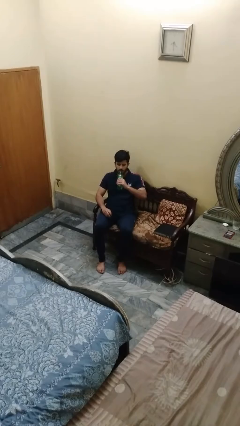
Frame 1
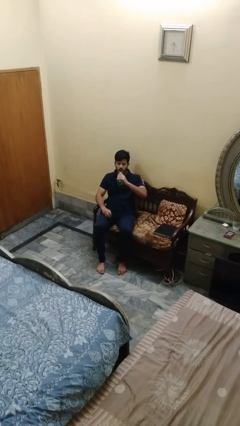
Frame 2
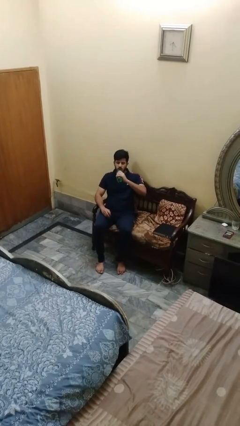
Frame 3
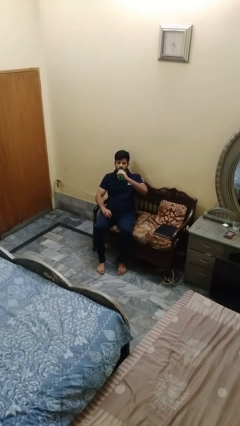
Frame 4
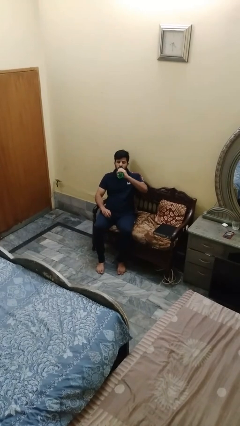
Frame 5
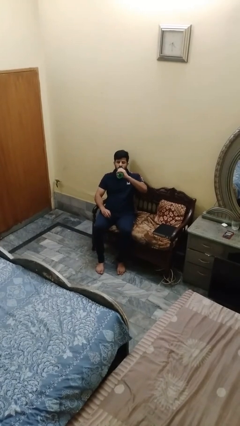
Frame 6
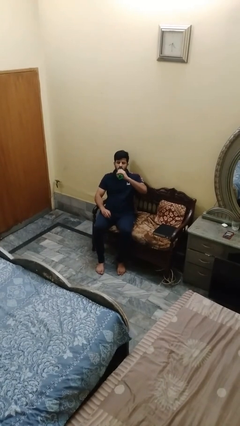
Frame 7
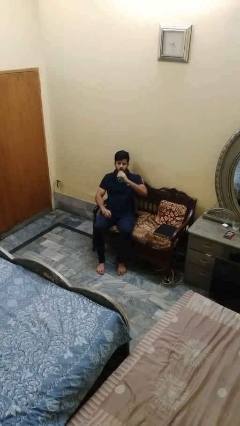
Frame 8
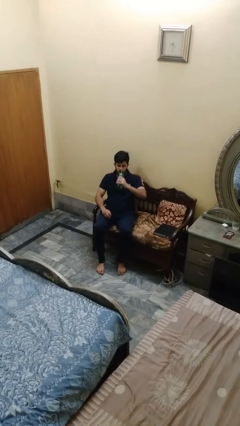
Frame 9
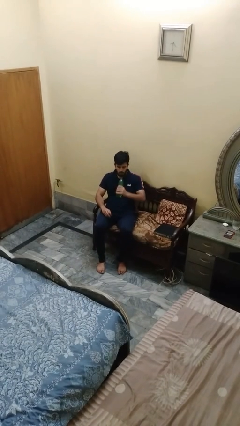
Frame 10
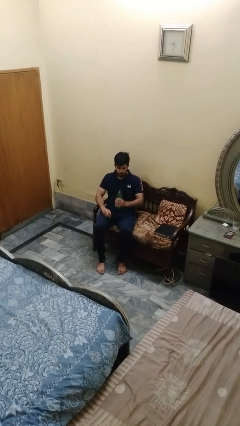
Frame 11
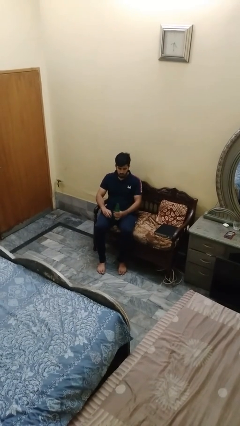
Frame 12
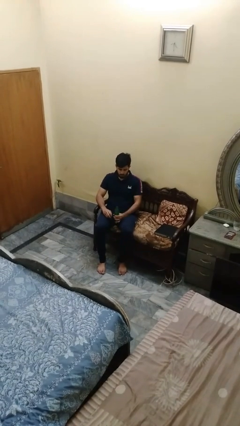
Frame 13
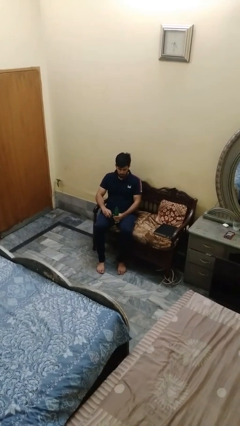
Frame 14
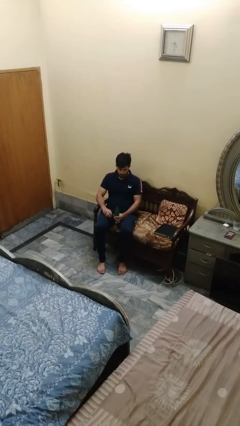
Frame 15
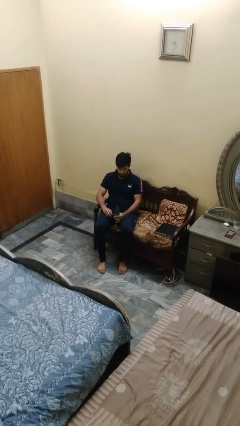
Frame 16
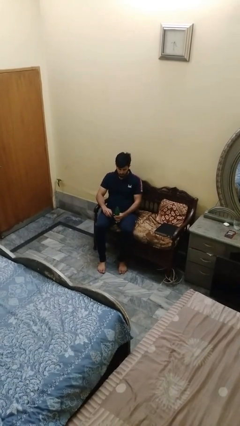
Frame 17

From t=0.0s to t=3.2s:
person drinks from bottle

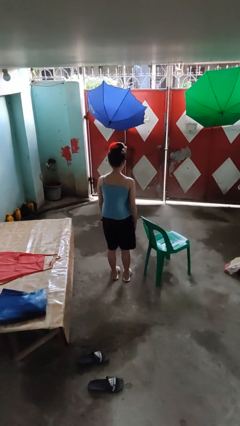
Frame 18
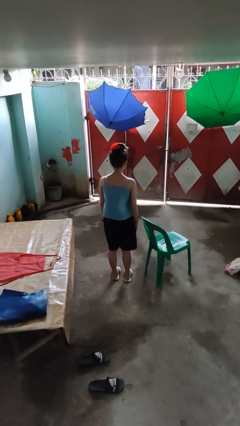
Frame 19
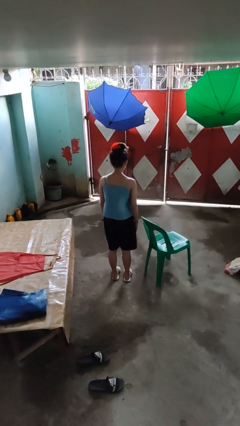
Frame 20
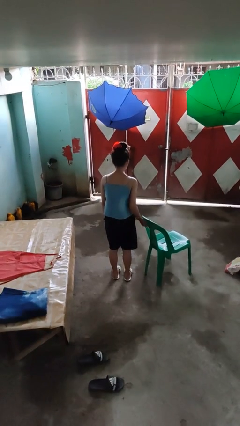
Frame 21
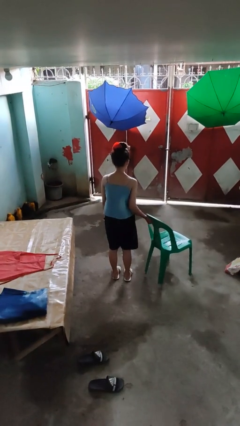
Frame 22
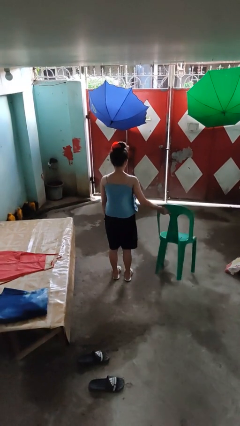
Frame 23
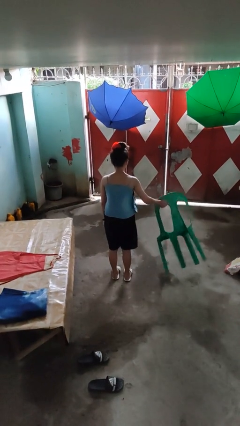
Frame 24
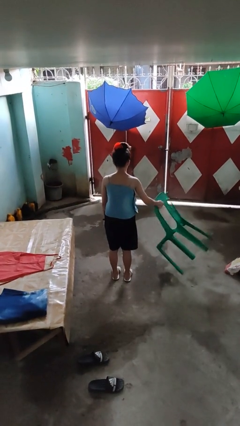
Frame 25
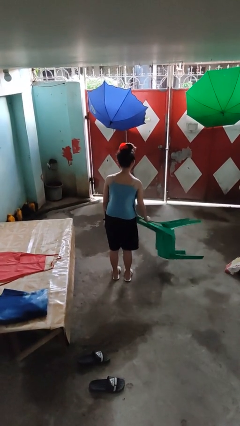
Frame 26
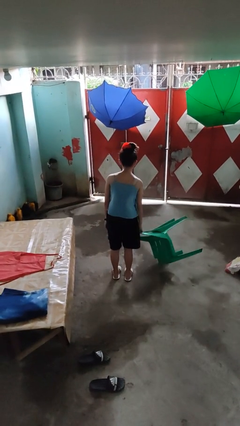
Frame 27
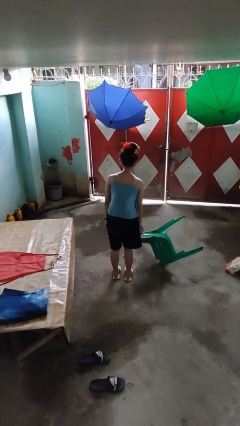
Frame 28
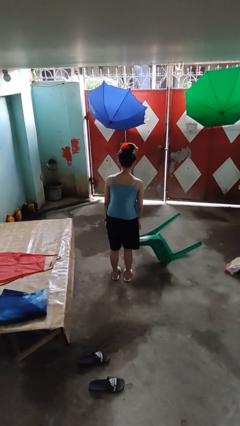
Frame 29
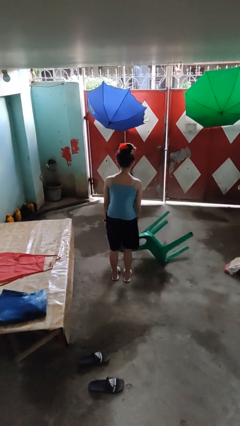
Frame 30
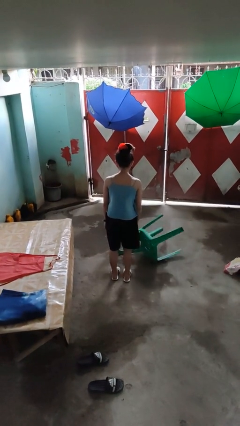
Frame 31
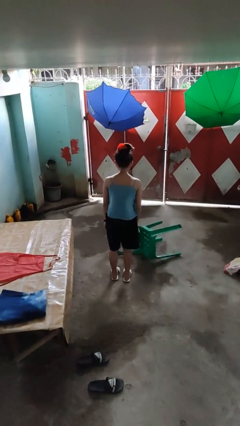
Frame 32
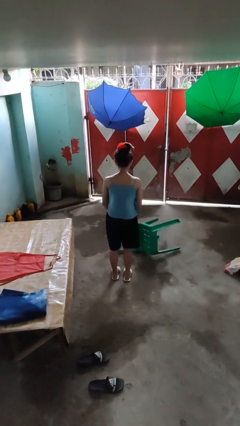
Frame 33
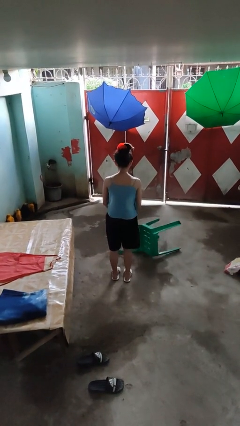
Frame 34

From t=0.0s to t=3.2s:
person knocks over furniture

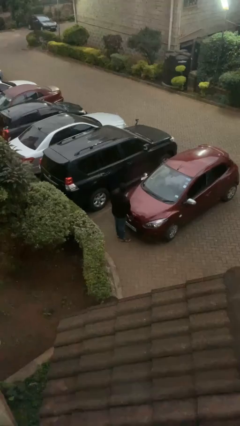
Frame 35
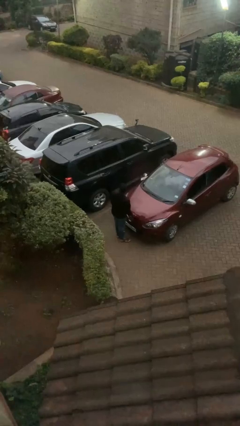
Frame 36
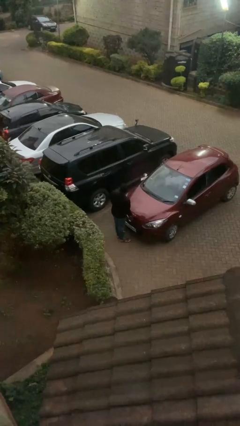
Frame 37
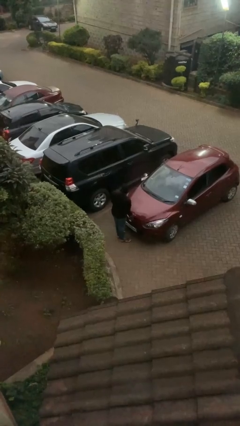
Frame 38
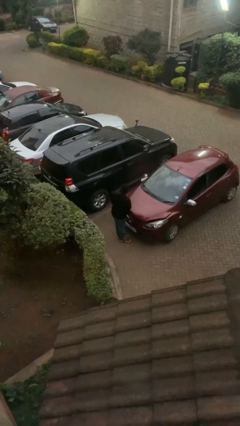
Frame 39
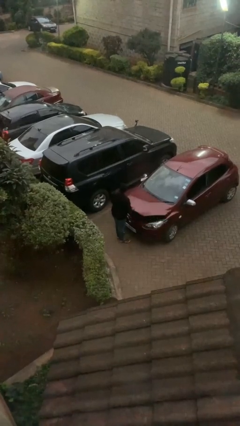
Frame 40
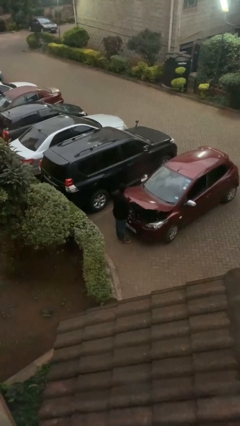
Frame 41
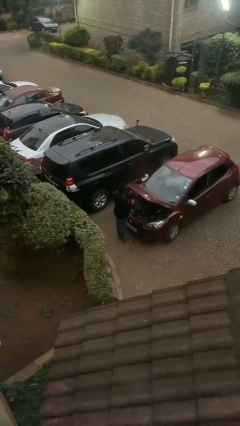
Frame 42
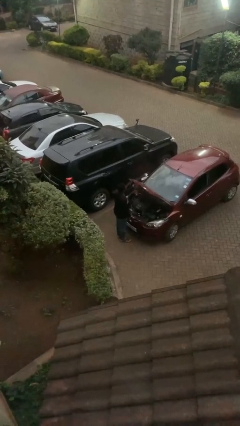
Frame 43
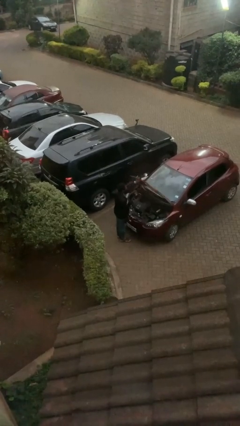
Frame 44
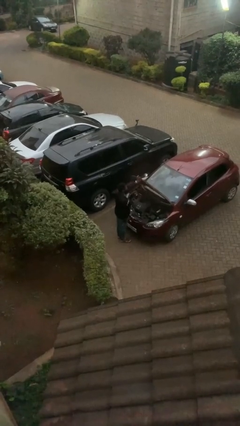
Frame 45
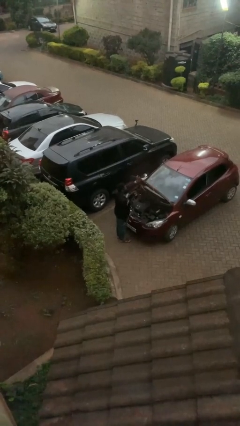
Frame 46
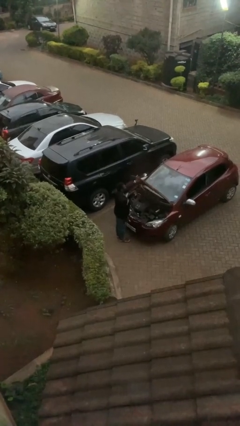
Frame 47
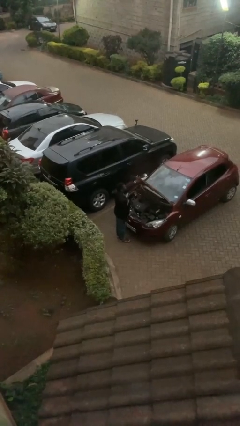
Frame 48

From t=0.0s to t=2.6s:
person opens car hood

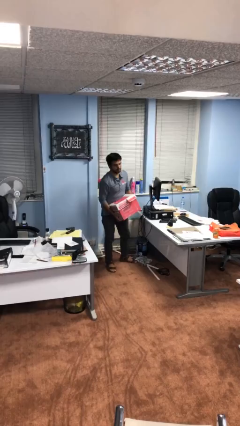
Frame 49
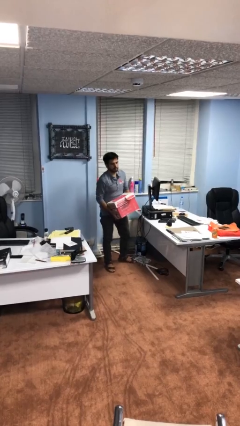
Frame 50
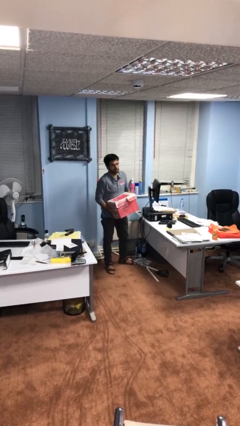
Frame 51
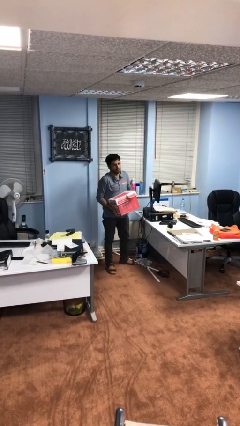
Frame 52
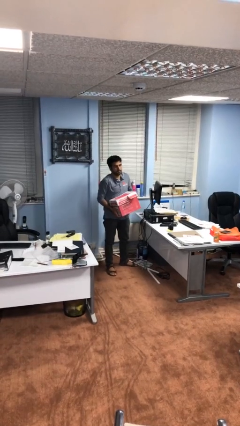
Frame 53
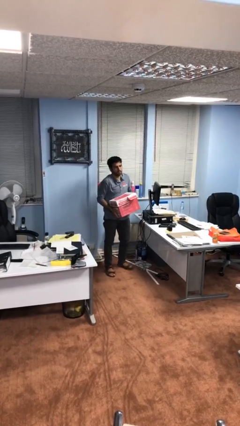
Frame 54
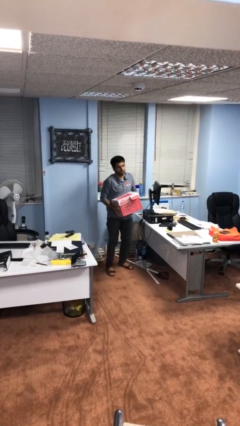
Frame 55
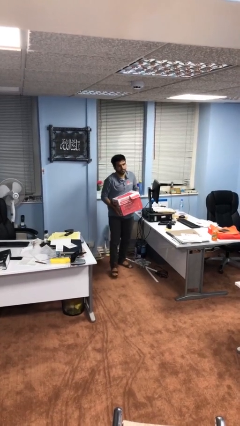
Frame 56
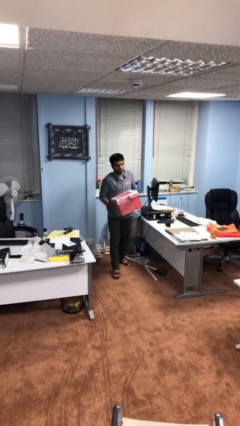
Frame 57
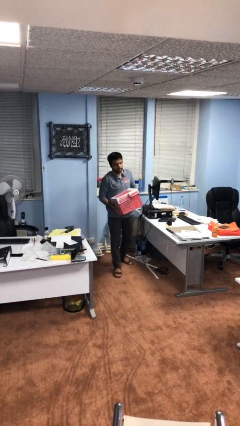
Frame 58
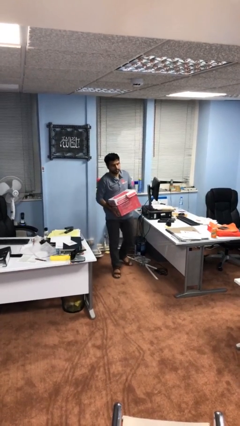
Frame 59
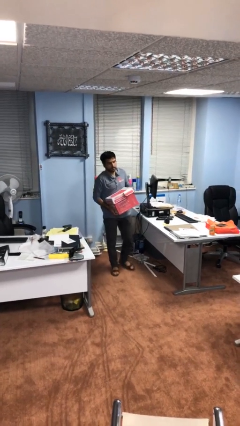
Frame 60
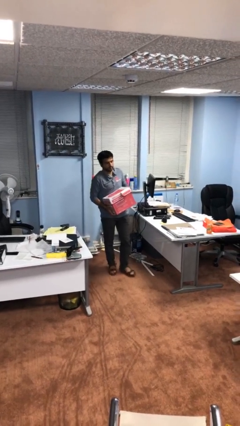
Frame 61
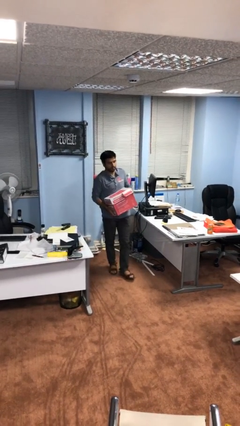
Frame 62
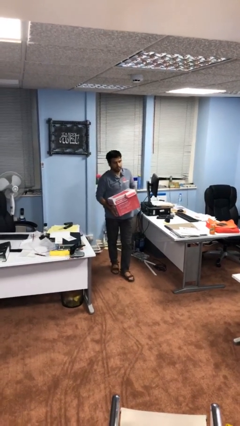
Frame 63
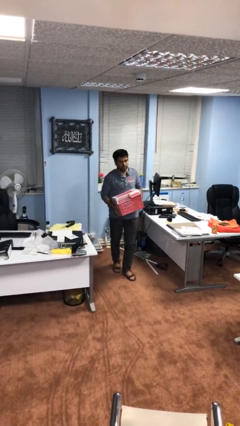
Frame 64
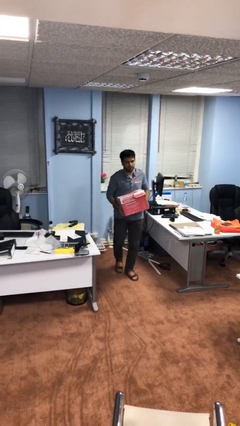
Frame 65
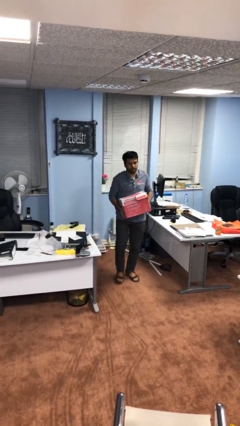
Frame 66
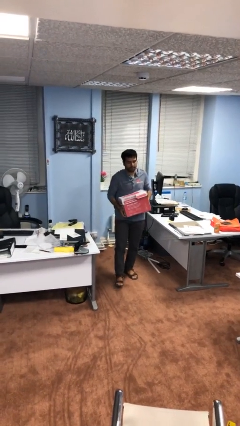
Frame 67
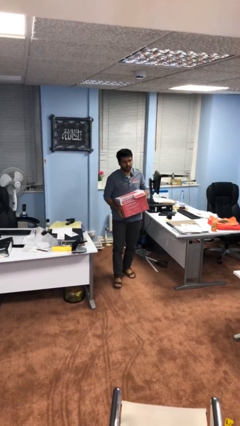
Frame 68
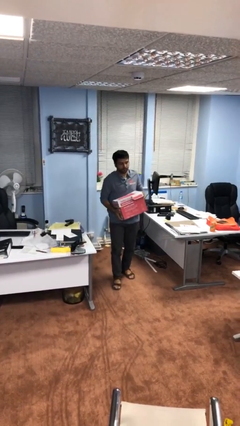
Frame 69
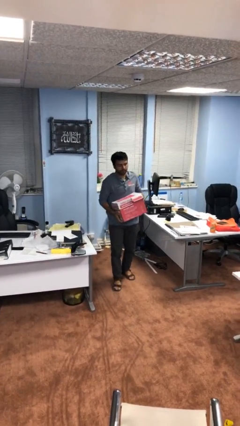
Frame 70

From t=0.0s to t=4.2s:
person carries heavy object

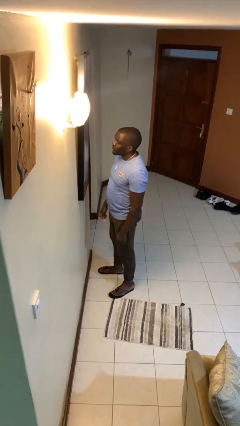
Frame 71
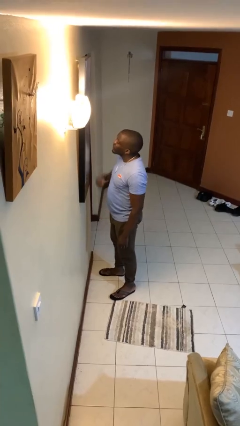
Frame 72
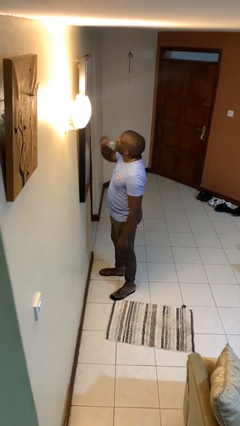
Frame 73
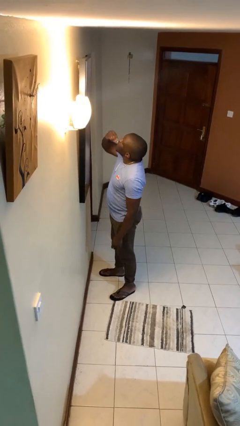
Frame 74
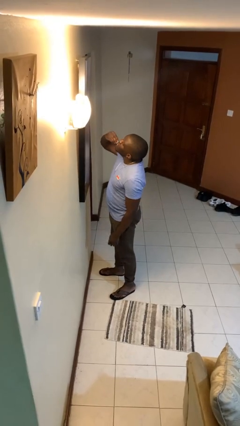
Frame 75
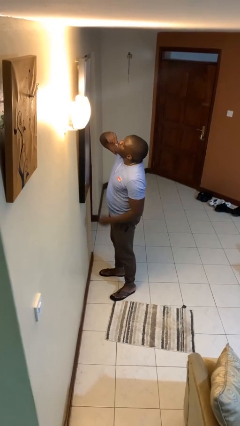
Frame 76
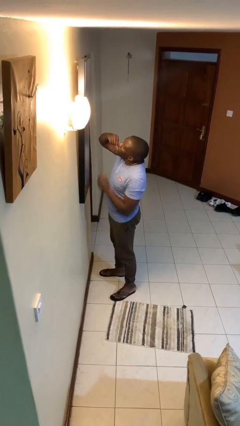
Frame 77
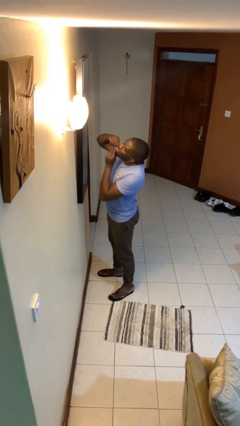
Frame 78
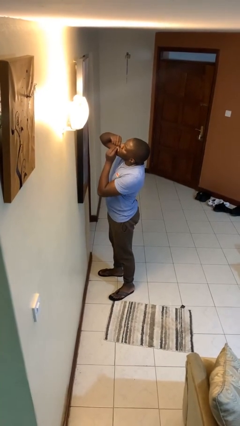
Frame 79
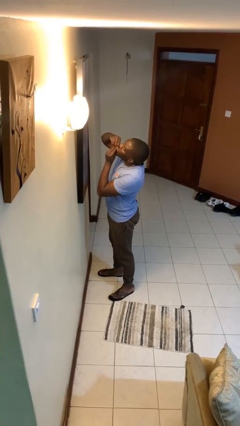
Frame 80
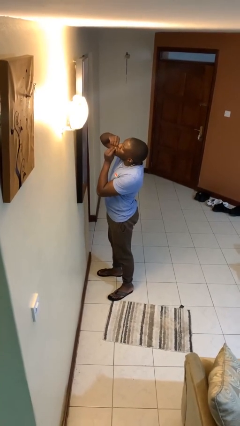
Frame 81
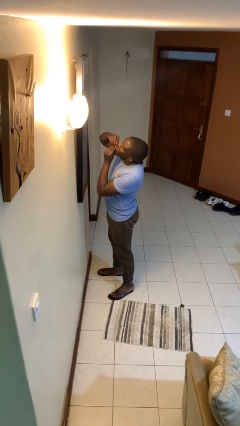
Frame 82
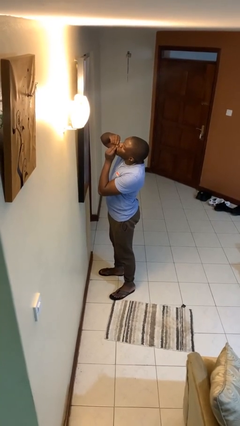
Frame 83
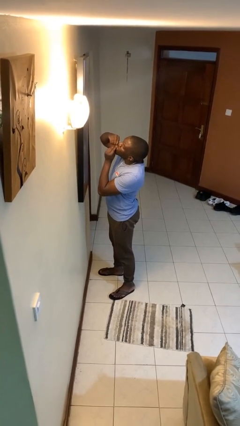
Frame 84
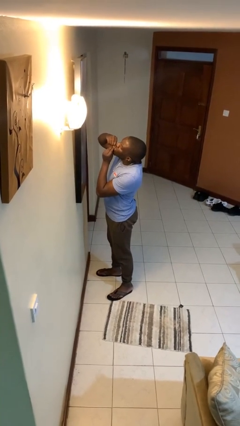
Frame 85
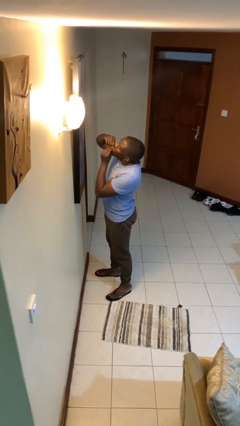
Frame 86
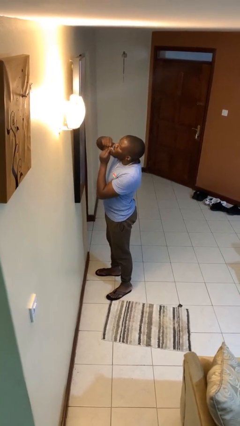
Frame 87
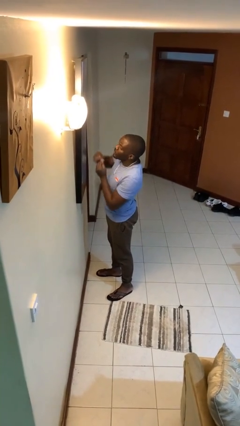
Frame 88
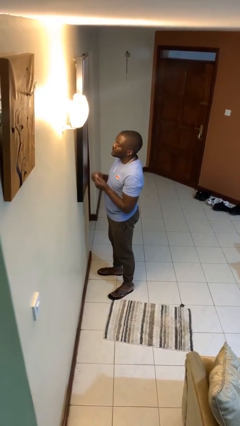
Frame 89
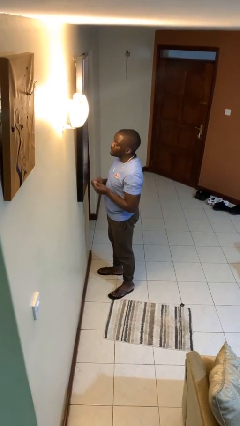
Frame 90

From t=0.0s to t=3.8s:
person flosses

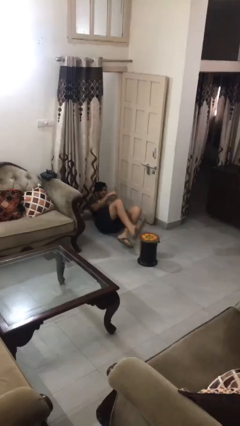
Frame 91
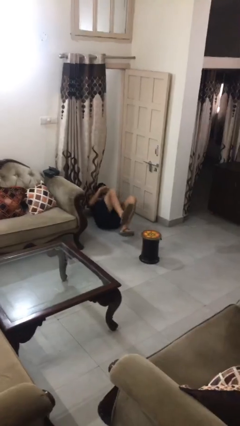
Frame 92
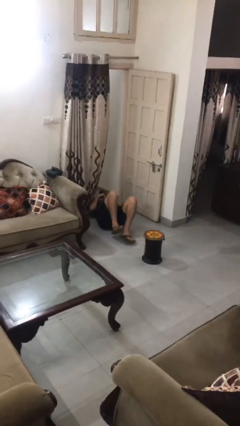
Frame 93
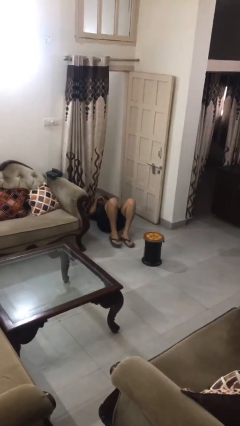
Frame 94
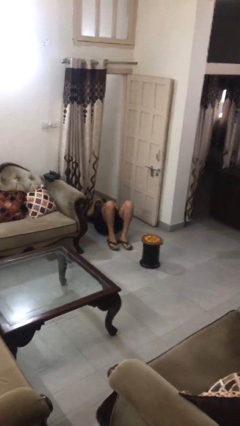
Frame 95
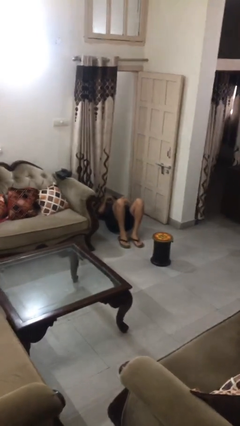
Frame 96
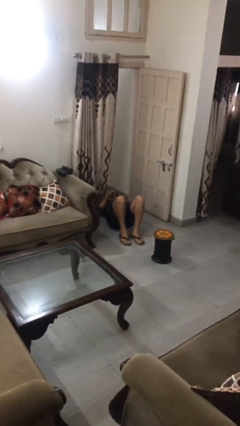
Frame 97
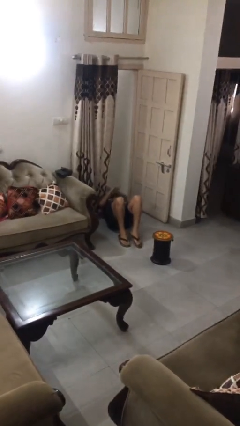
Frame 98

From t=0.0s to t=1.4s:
person lies down on floor
